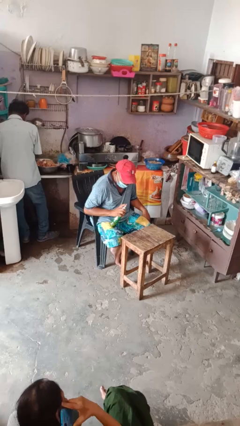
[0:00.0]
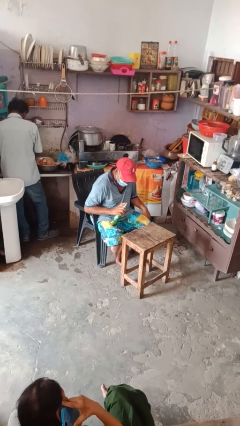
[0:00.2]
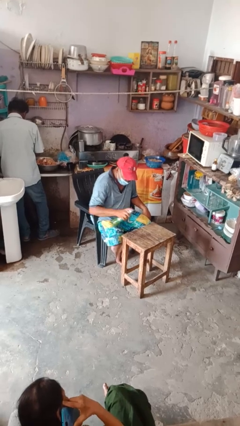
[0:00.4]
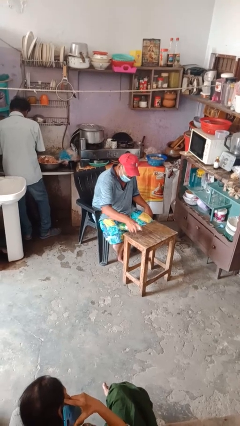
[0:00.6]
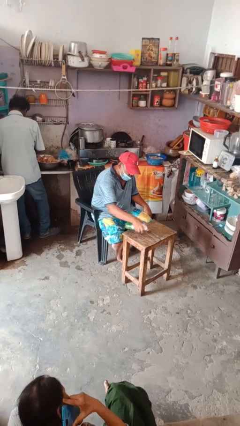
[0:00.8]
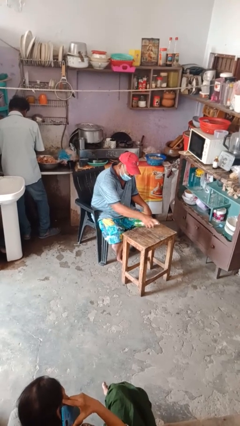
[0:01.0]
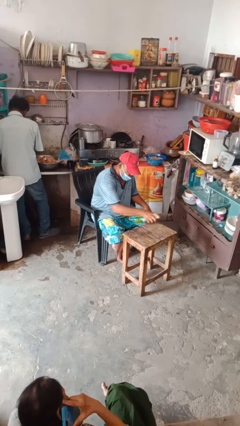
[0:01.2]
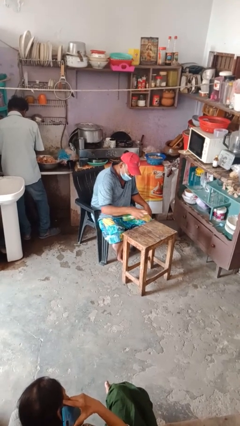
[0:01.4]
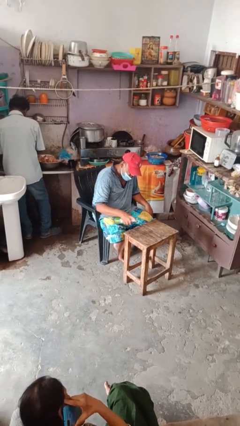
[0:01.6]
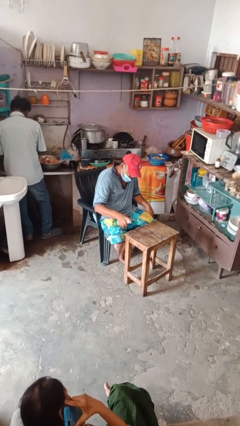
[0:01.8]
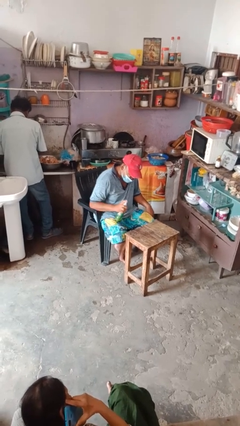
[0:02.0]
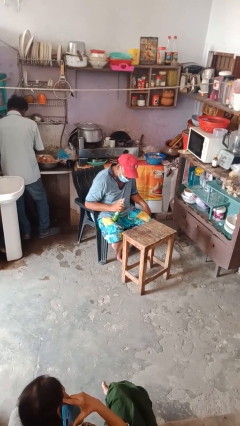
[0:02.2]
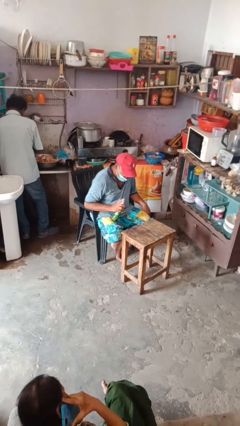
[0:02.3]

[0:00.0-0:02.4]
person sprays from bottle

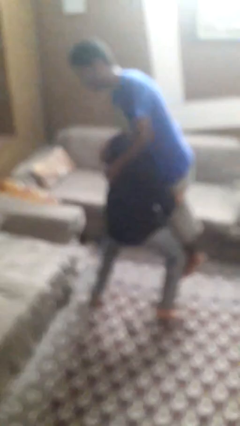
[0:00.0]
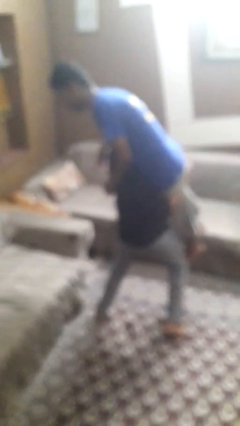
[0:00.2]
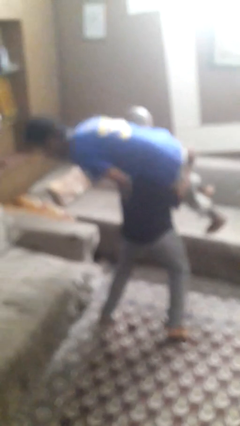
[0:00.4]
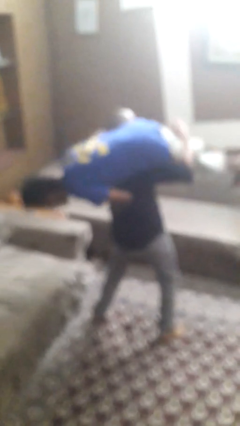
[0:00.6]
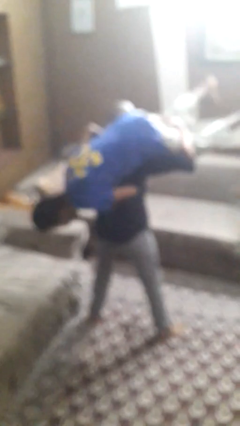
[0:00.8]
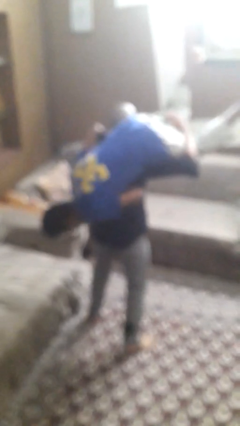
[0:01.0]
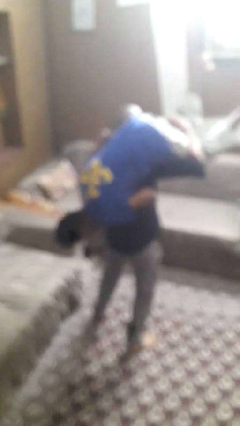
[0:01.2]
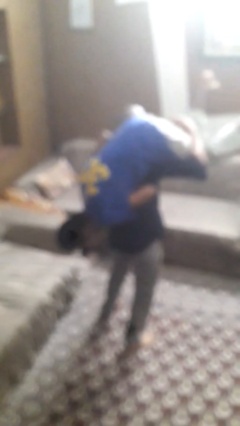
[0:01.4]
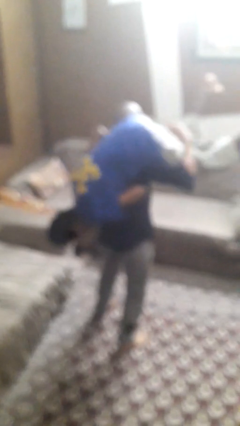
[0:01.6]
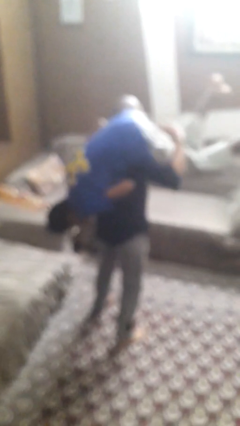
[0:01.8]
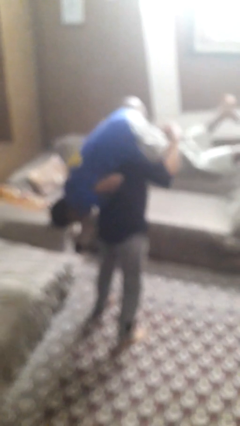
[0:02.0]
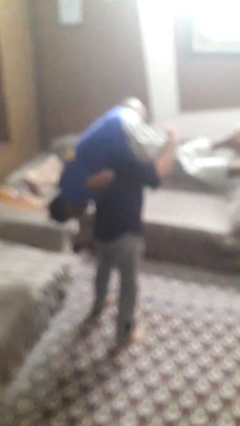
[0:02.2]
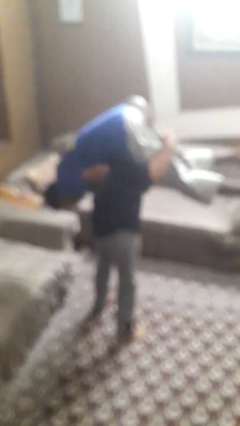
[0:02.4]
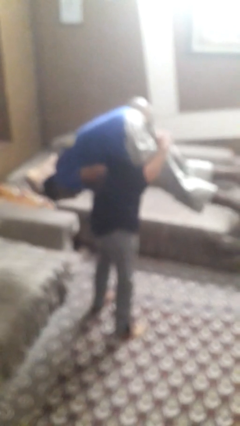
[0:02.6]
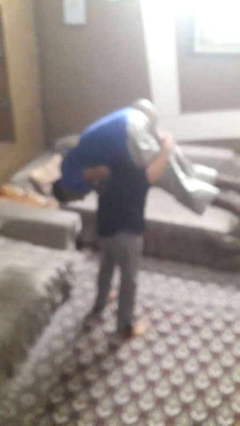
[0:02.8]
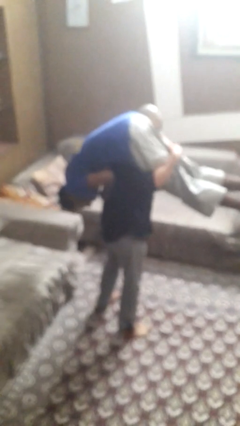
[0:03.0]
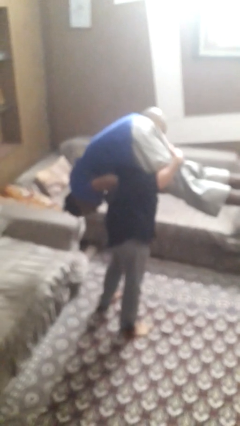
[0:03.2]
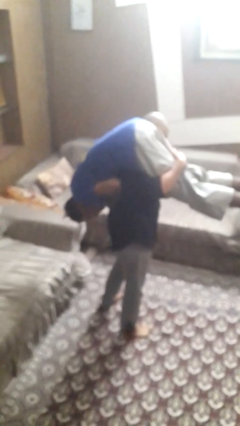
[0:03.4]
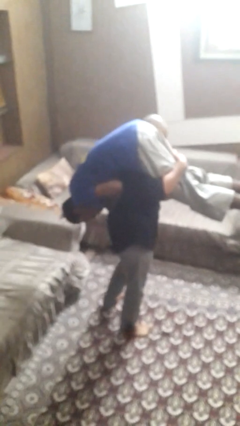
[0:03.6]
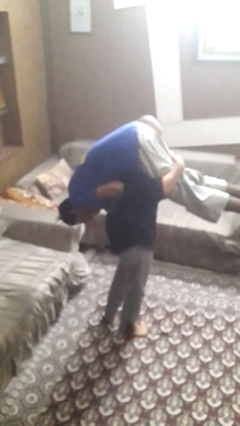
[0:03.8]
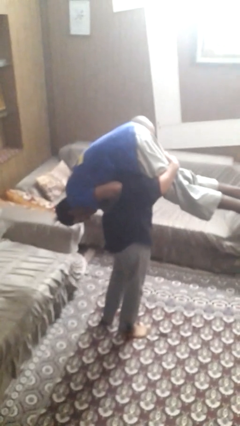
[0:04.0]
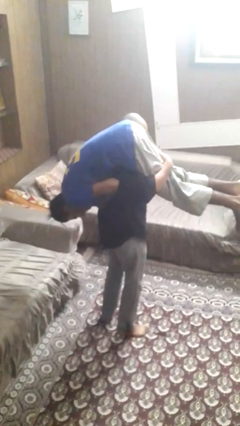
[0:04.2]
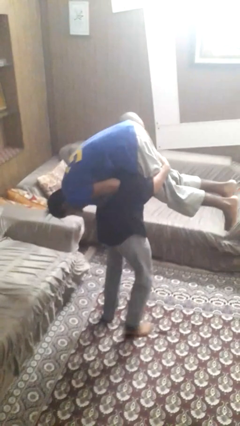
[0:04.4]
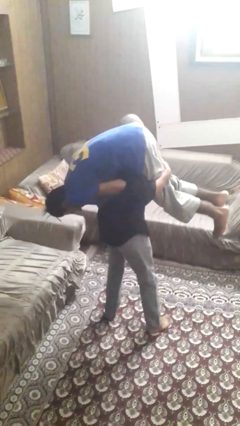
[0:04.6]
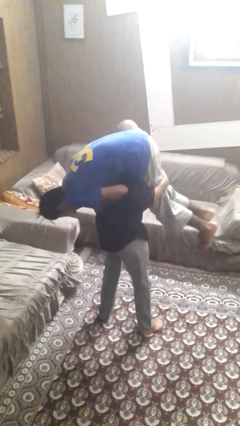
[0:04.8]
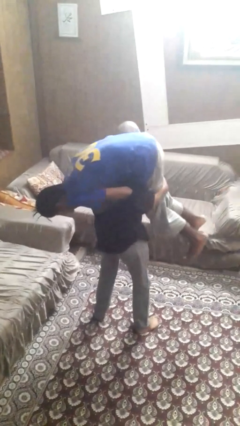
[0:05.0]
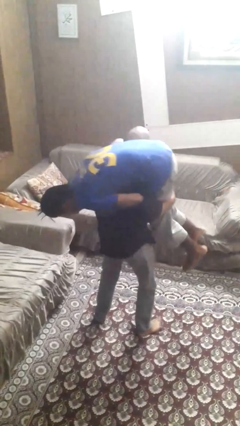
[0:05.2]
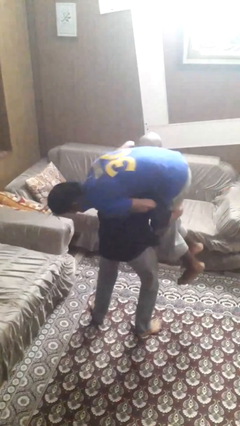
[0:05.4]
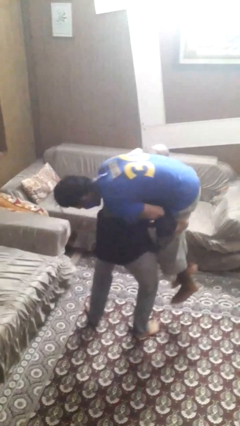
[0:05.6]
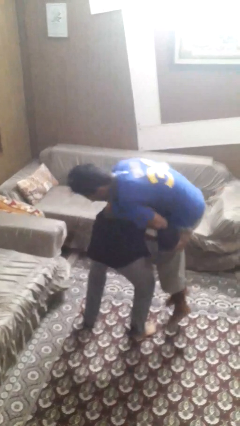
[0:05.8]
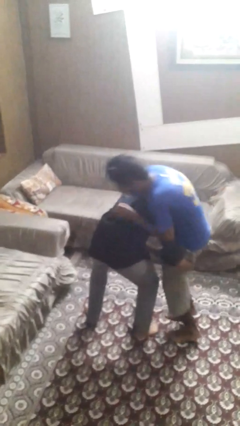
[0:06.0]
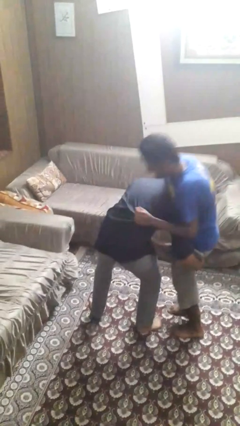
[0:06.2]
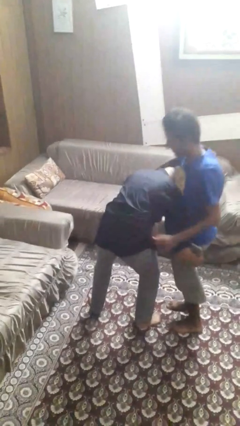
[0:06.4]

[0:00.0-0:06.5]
person carries person over shoulder

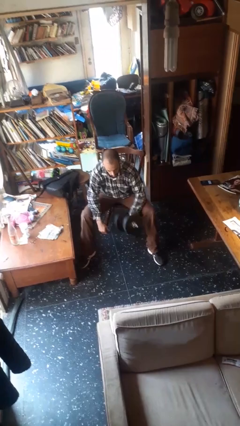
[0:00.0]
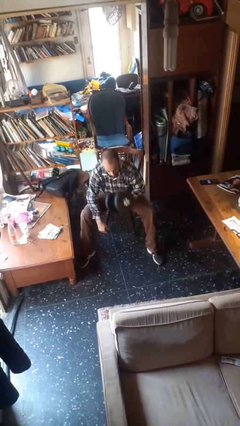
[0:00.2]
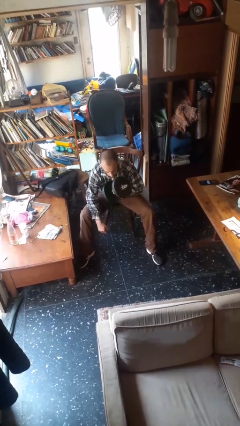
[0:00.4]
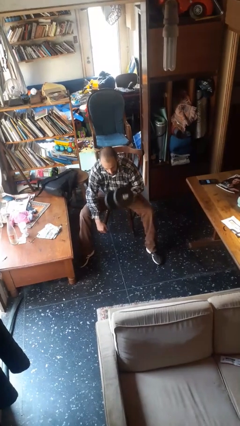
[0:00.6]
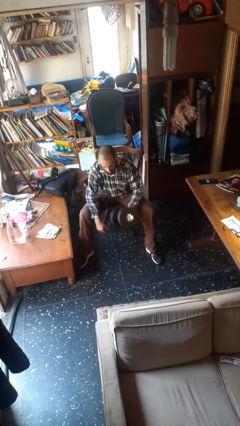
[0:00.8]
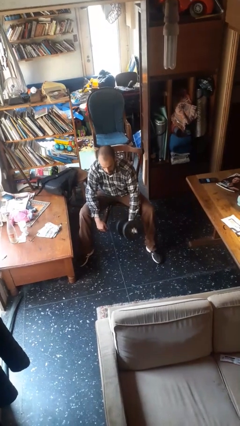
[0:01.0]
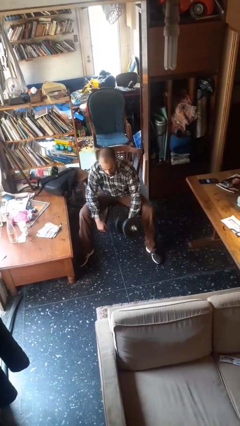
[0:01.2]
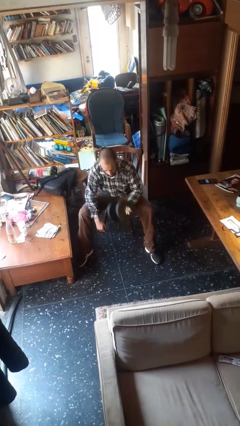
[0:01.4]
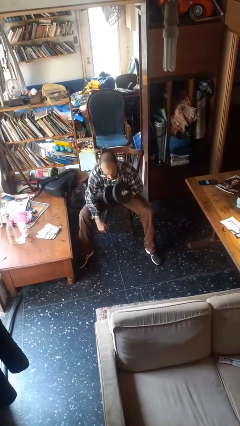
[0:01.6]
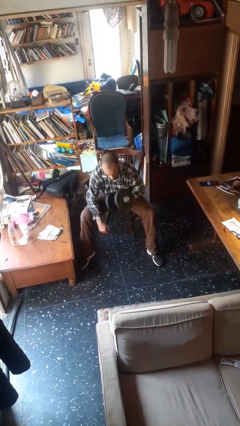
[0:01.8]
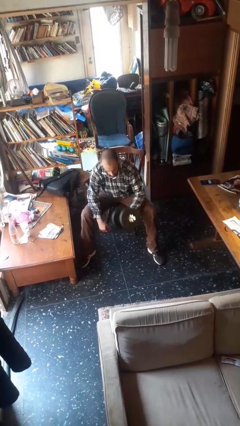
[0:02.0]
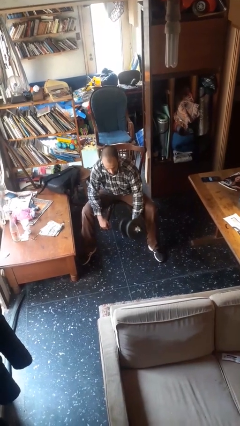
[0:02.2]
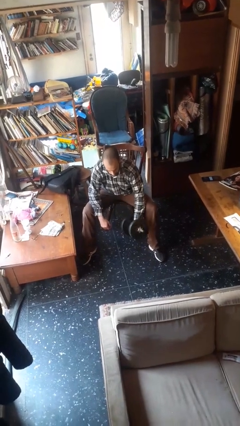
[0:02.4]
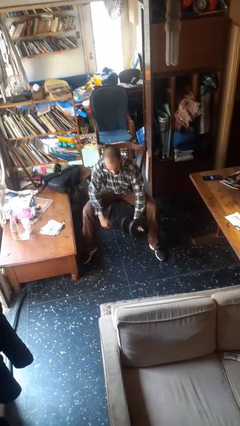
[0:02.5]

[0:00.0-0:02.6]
person lifts dumbbells

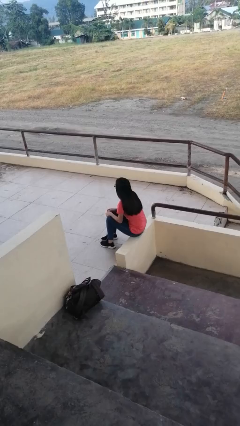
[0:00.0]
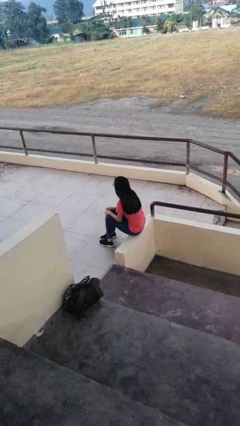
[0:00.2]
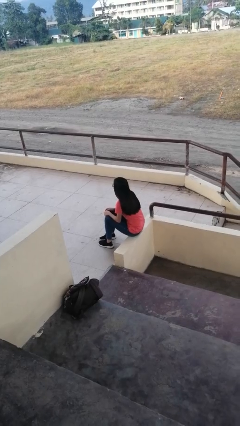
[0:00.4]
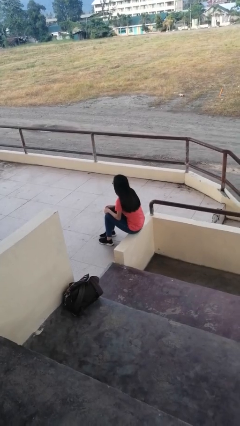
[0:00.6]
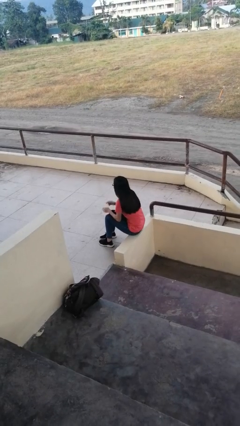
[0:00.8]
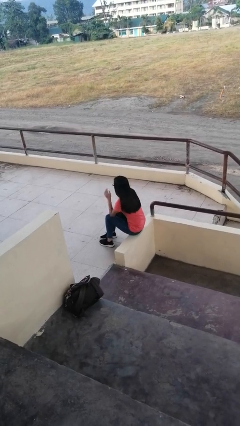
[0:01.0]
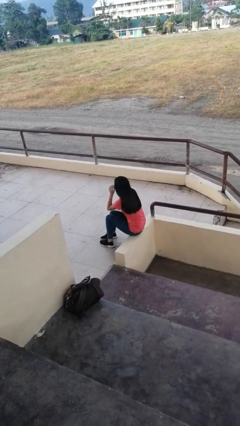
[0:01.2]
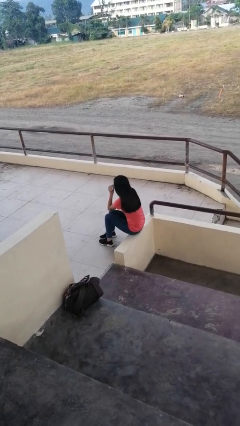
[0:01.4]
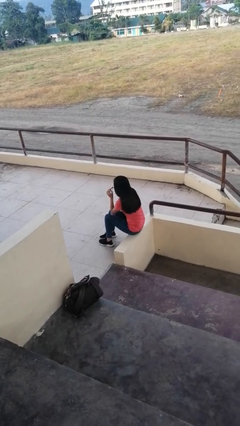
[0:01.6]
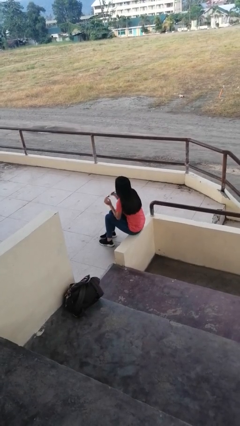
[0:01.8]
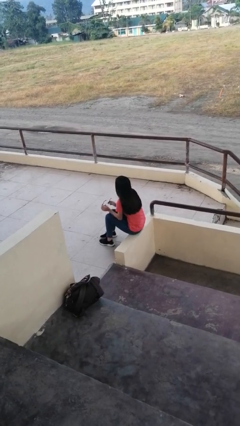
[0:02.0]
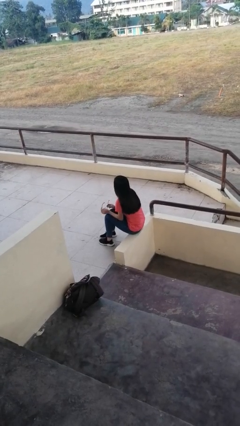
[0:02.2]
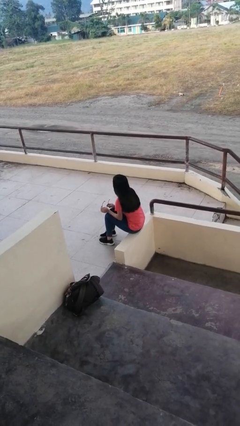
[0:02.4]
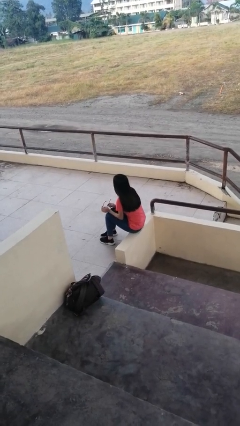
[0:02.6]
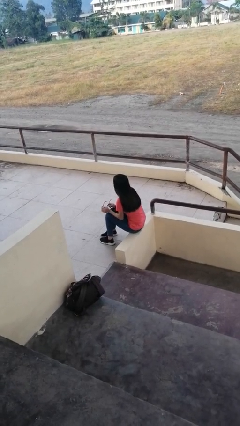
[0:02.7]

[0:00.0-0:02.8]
person takes off glasses

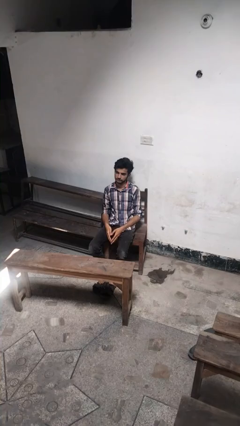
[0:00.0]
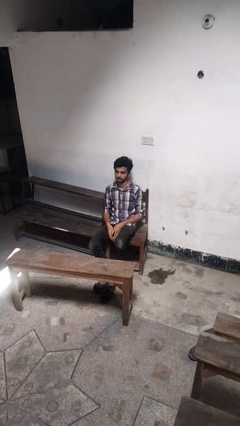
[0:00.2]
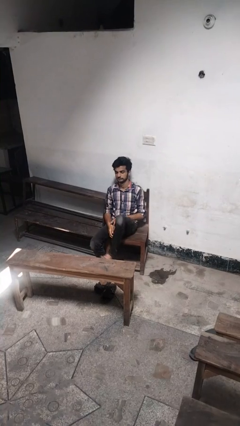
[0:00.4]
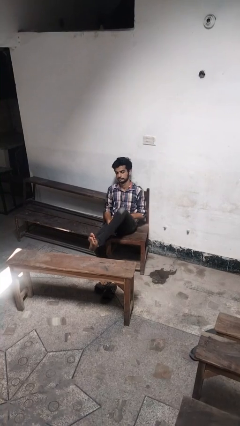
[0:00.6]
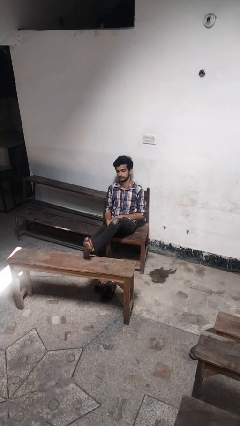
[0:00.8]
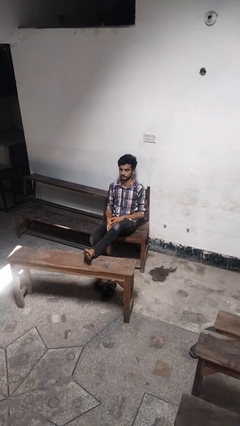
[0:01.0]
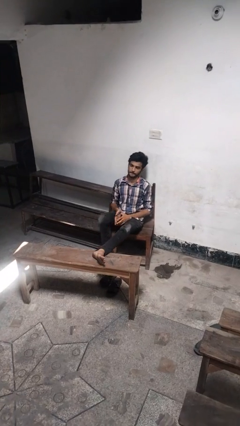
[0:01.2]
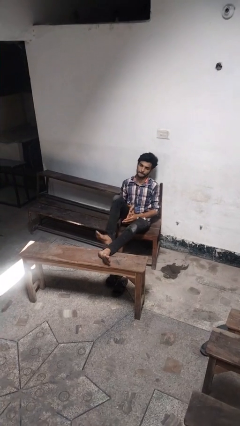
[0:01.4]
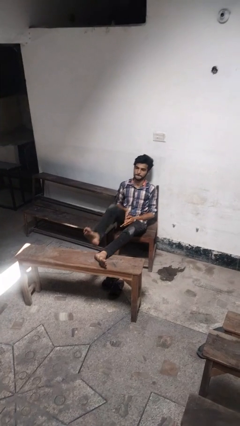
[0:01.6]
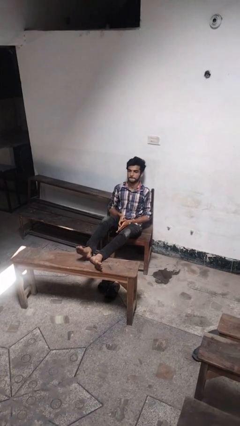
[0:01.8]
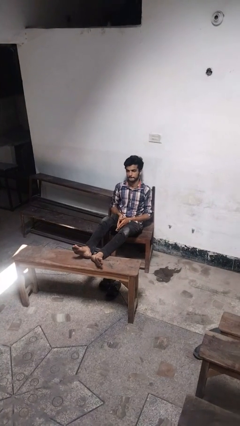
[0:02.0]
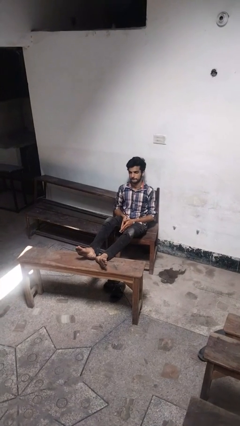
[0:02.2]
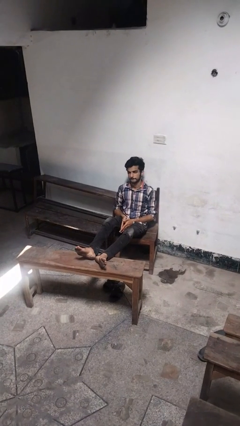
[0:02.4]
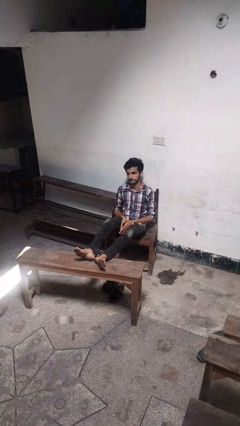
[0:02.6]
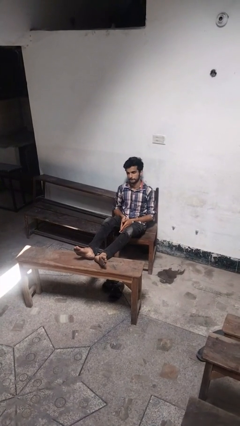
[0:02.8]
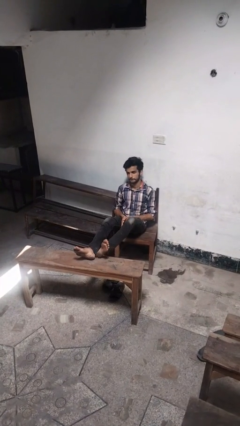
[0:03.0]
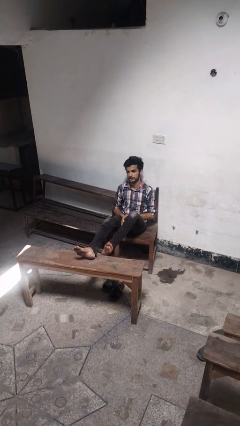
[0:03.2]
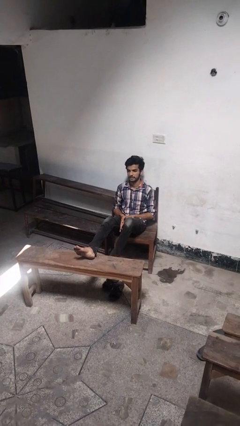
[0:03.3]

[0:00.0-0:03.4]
person puts feet up
